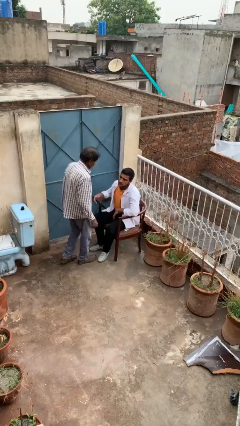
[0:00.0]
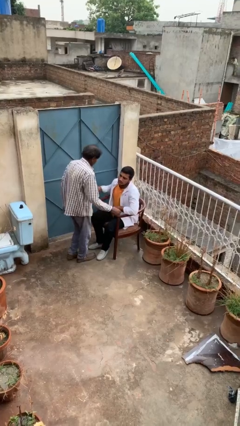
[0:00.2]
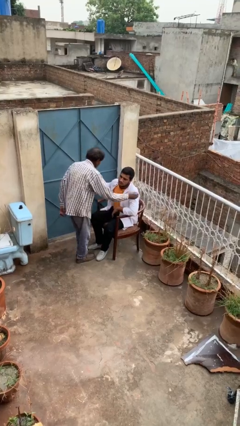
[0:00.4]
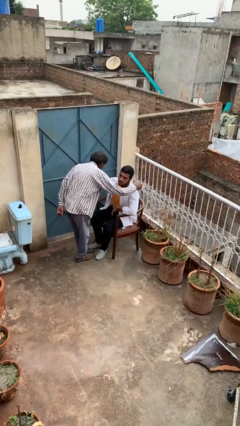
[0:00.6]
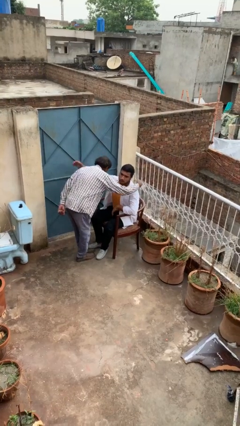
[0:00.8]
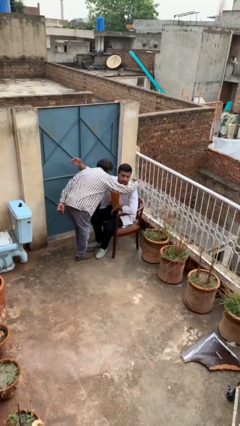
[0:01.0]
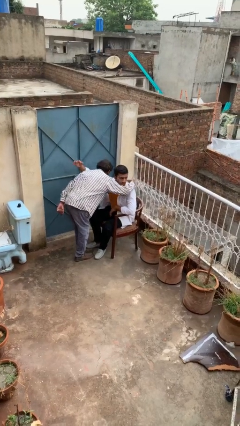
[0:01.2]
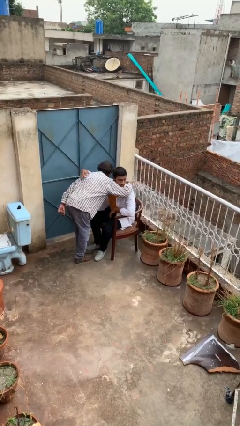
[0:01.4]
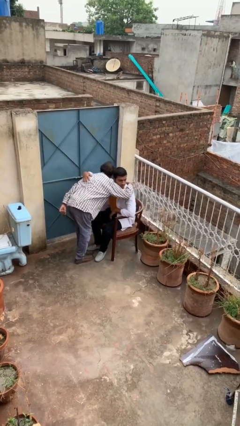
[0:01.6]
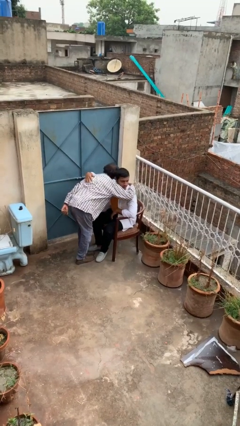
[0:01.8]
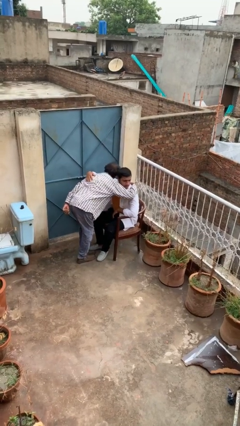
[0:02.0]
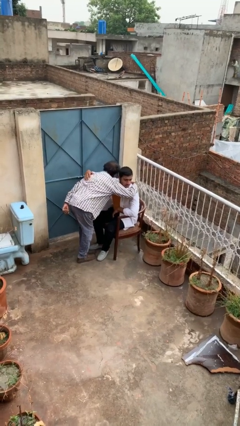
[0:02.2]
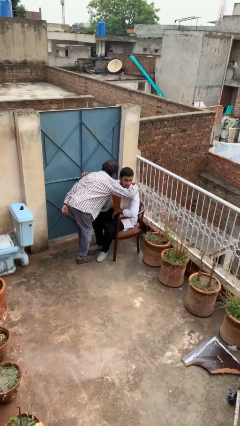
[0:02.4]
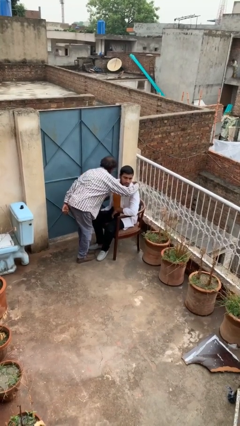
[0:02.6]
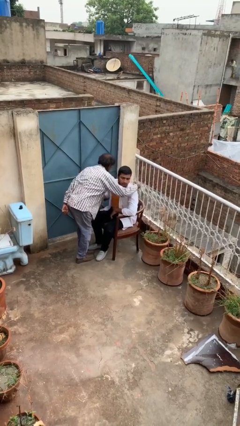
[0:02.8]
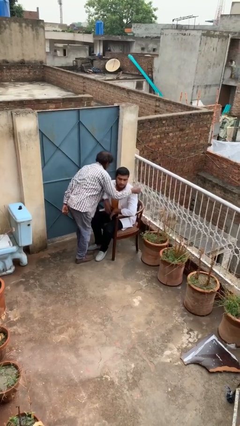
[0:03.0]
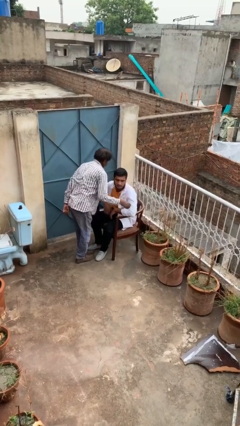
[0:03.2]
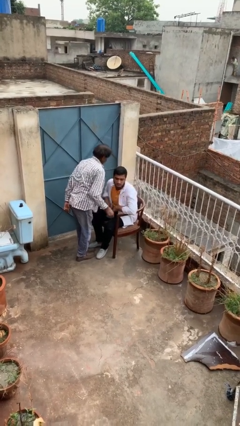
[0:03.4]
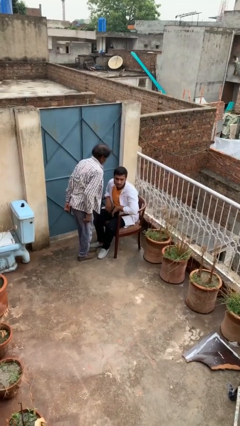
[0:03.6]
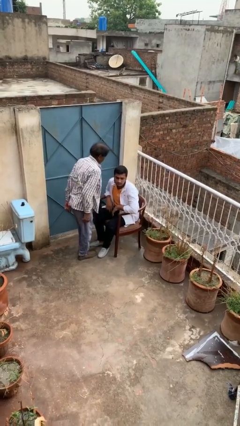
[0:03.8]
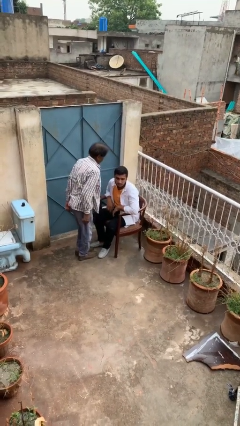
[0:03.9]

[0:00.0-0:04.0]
person embraces person

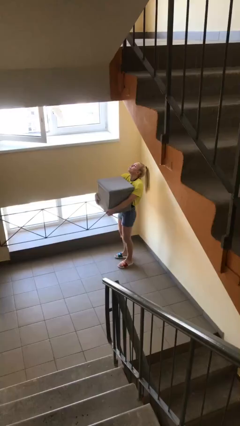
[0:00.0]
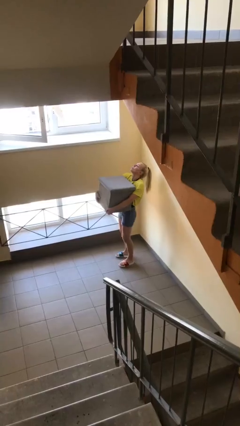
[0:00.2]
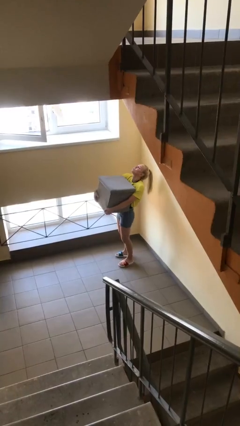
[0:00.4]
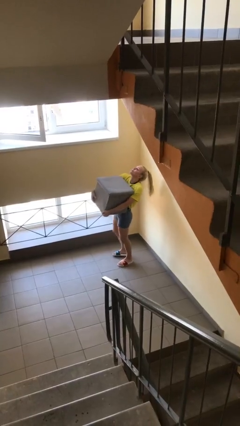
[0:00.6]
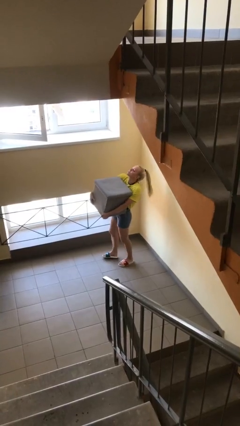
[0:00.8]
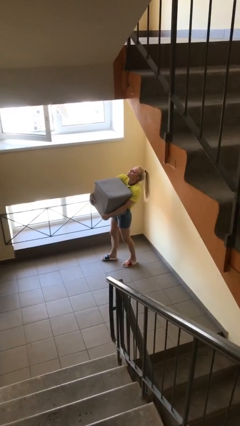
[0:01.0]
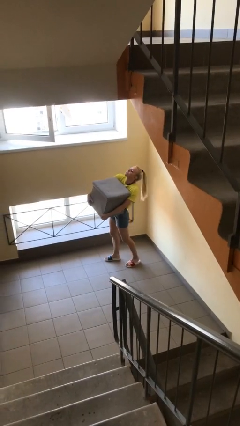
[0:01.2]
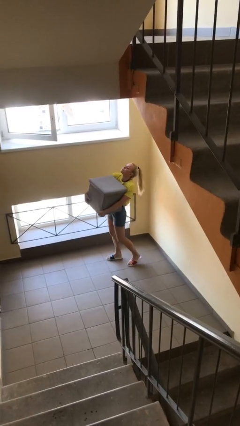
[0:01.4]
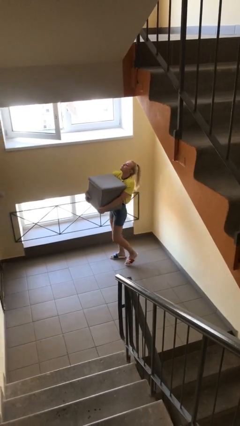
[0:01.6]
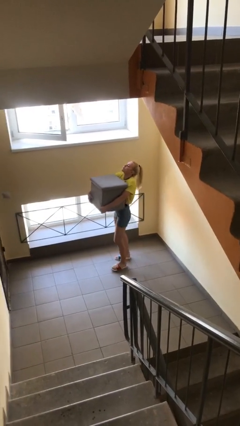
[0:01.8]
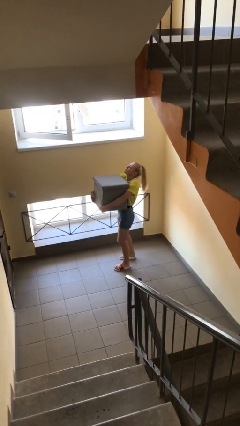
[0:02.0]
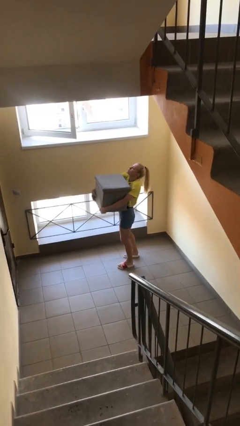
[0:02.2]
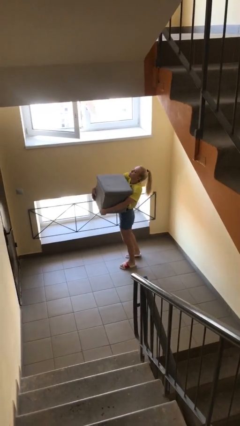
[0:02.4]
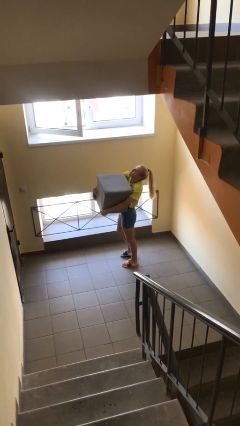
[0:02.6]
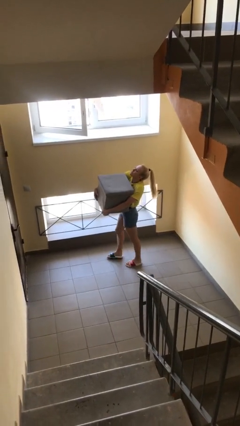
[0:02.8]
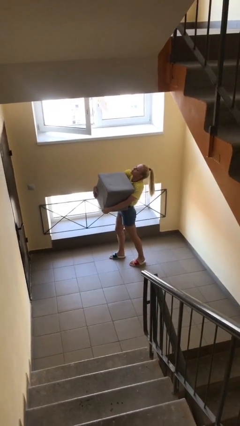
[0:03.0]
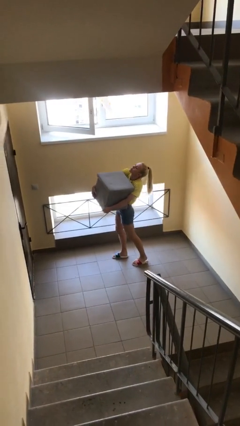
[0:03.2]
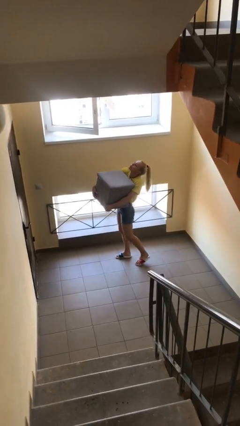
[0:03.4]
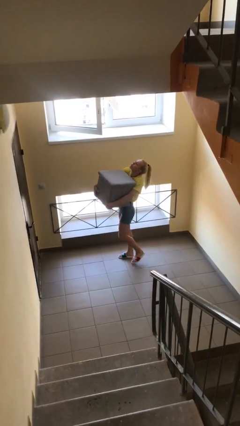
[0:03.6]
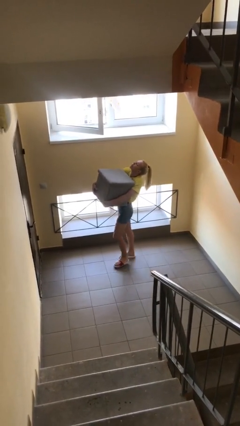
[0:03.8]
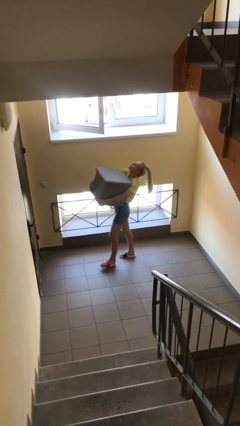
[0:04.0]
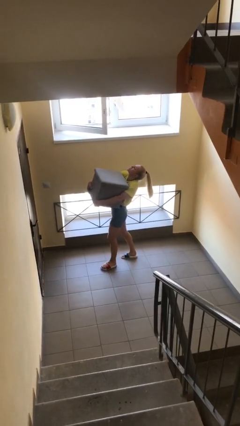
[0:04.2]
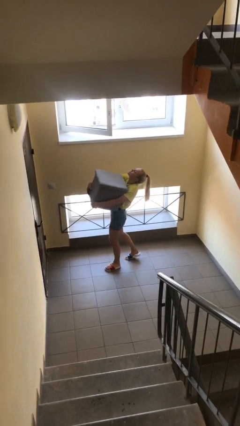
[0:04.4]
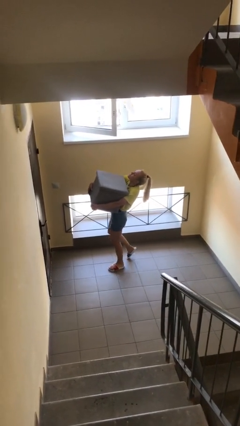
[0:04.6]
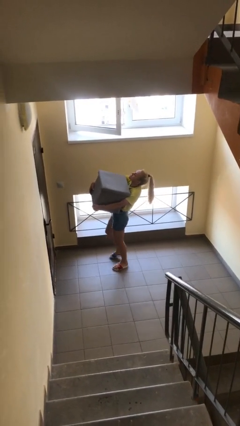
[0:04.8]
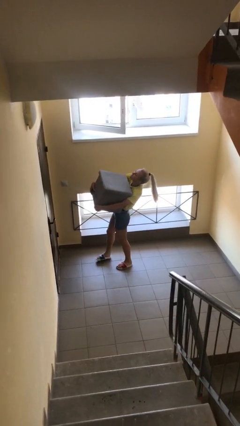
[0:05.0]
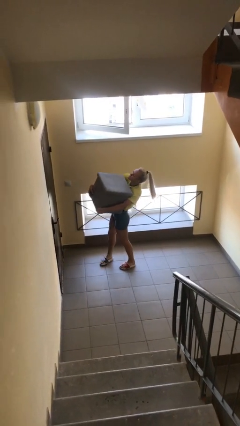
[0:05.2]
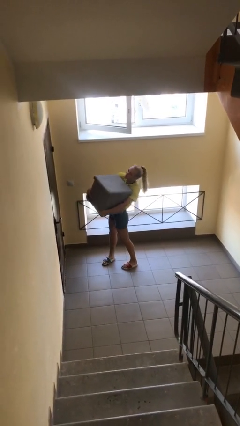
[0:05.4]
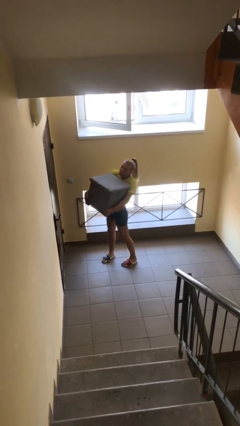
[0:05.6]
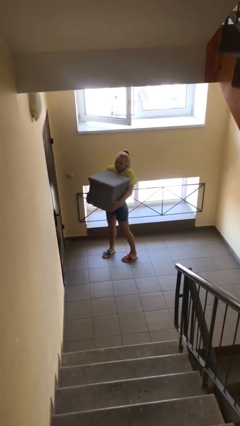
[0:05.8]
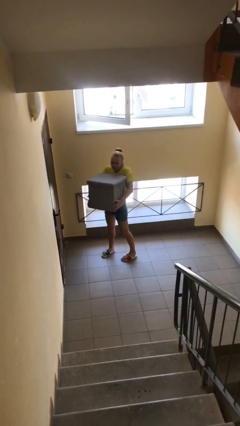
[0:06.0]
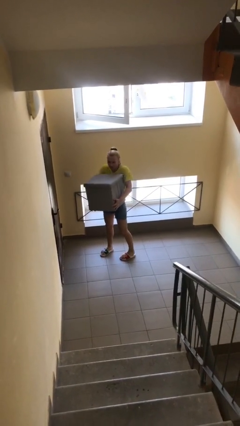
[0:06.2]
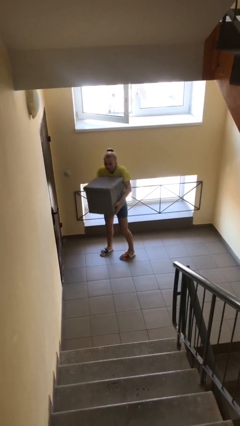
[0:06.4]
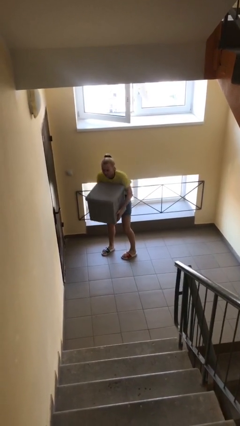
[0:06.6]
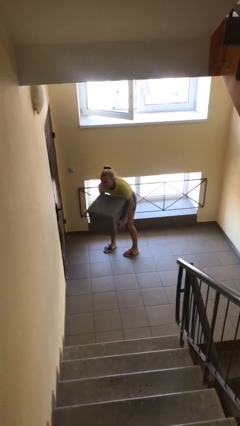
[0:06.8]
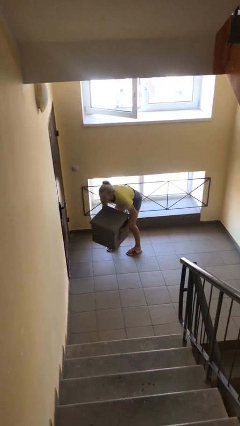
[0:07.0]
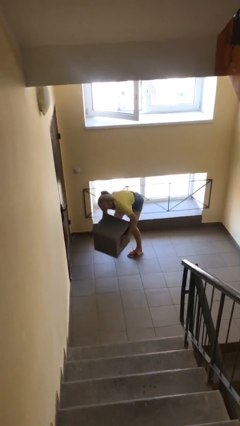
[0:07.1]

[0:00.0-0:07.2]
person carries heavy object

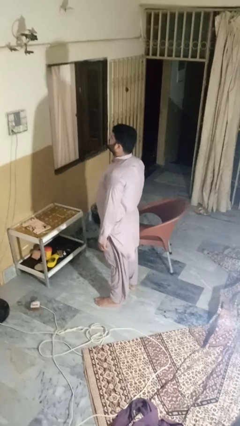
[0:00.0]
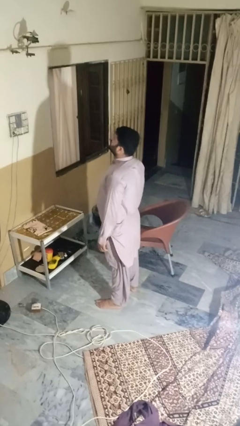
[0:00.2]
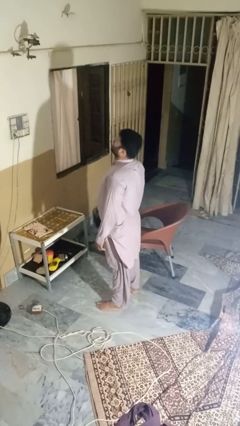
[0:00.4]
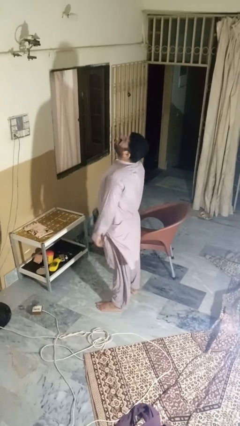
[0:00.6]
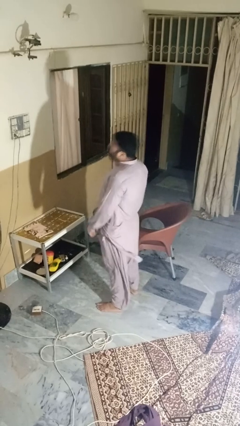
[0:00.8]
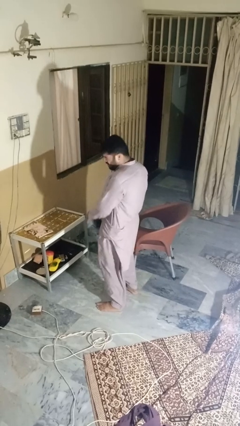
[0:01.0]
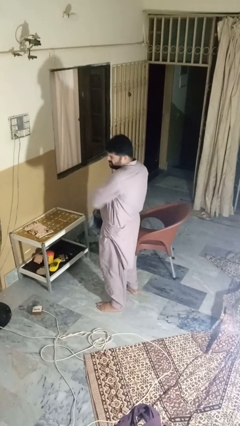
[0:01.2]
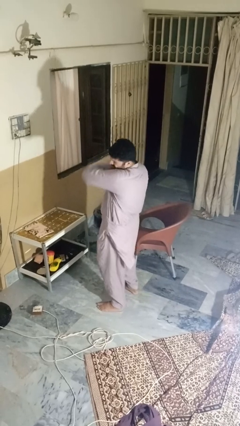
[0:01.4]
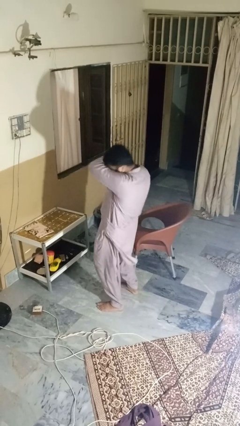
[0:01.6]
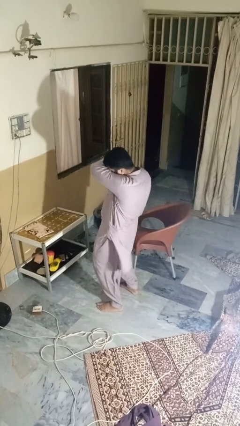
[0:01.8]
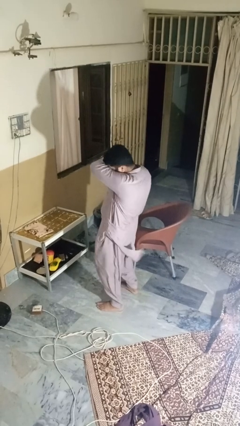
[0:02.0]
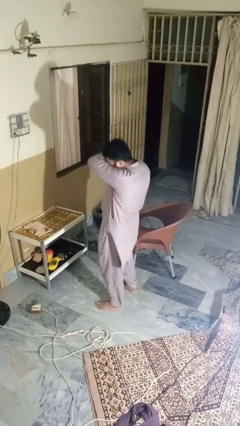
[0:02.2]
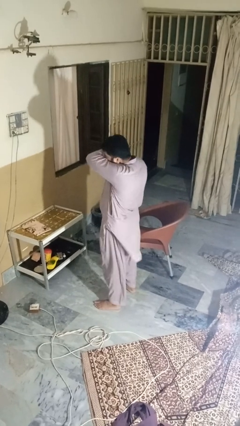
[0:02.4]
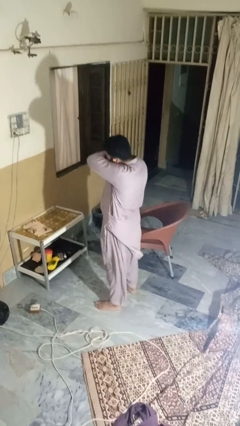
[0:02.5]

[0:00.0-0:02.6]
person sneezes into arm

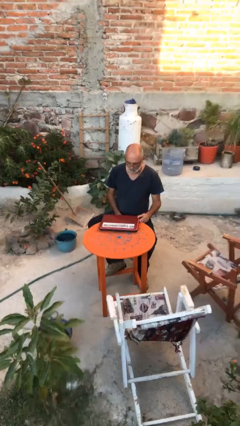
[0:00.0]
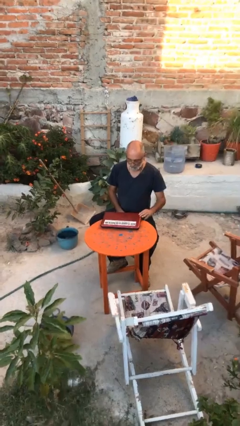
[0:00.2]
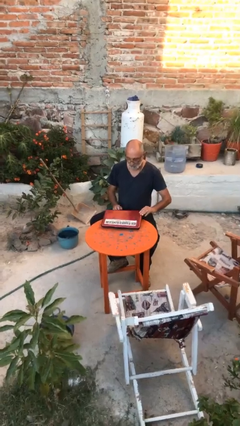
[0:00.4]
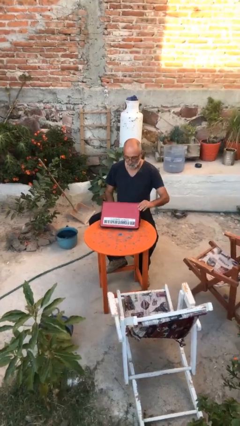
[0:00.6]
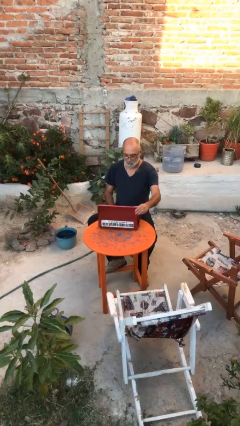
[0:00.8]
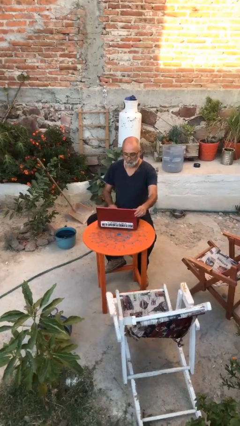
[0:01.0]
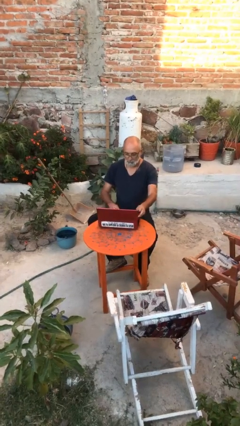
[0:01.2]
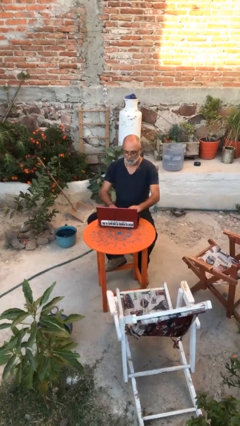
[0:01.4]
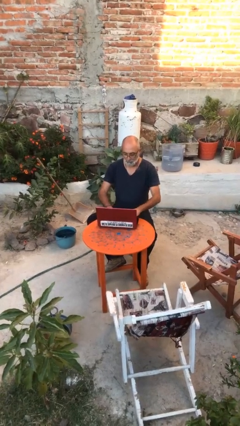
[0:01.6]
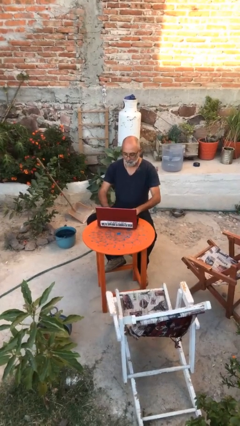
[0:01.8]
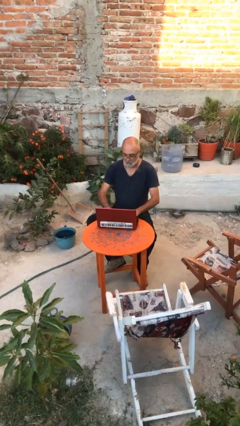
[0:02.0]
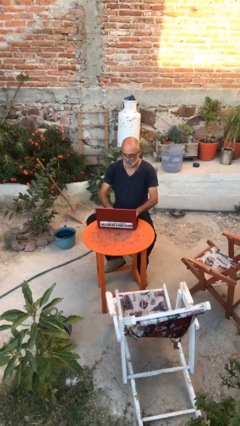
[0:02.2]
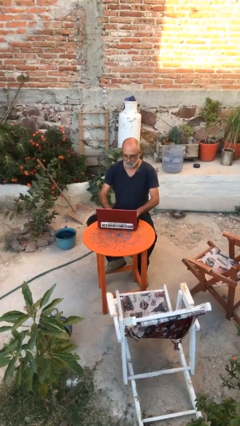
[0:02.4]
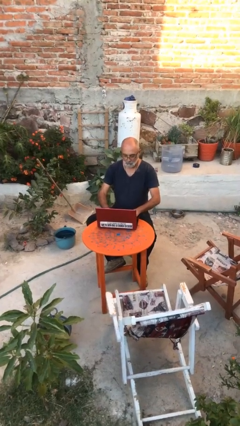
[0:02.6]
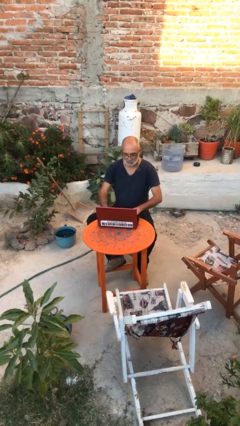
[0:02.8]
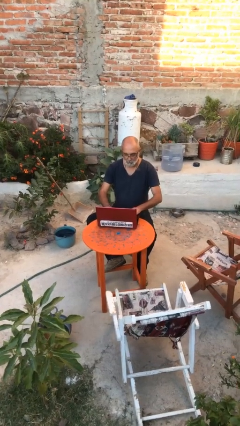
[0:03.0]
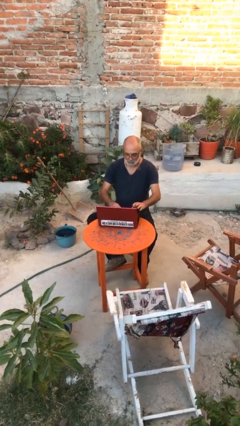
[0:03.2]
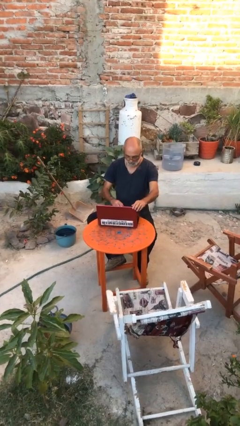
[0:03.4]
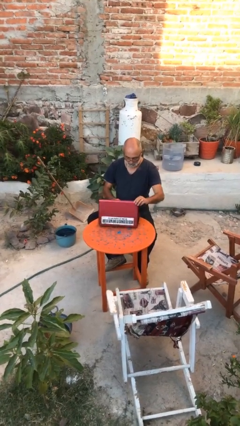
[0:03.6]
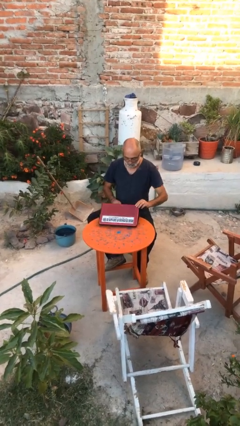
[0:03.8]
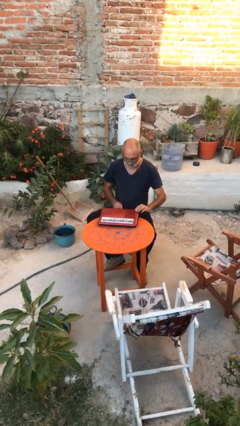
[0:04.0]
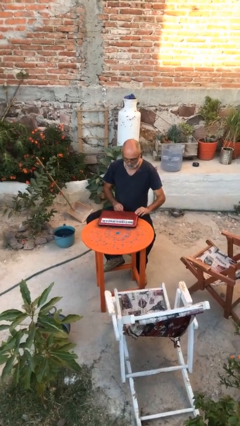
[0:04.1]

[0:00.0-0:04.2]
person interacts with laptop
